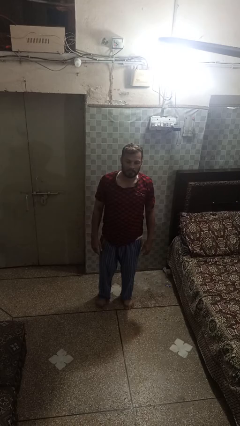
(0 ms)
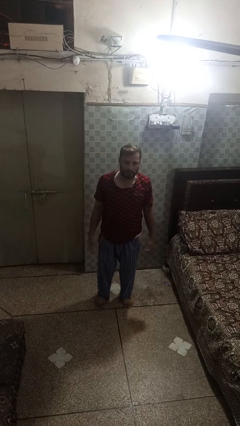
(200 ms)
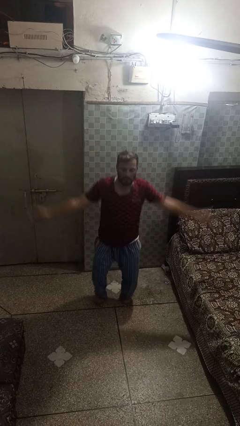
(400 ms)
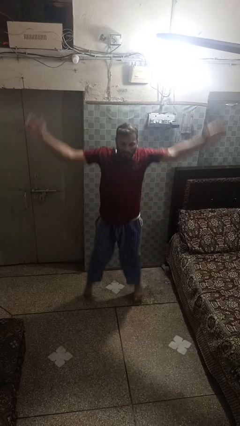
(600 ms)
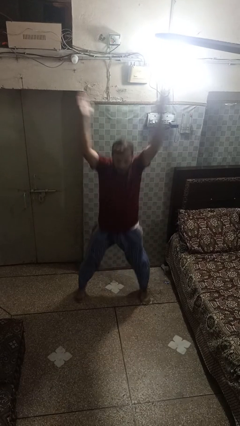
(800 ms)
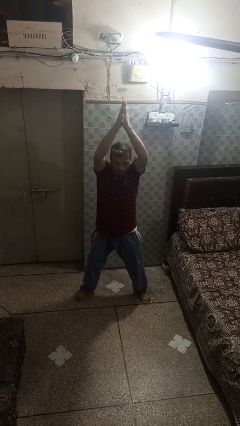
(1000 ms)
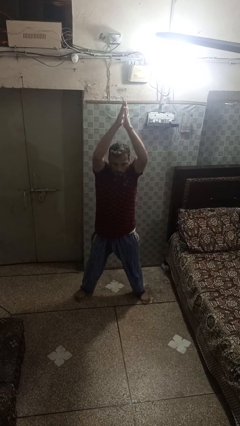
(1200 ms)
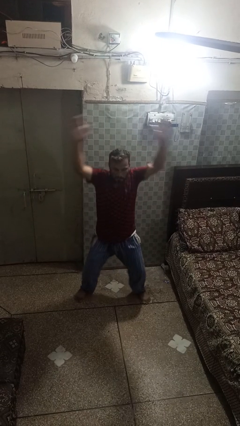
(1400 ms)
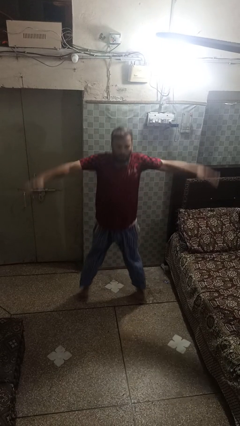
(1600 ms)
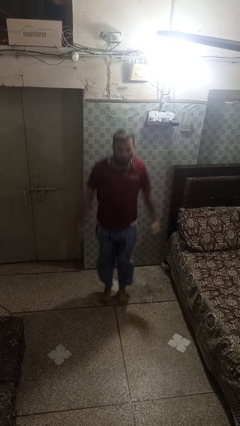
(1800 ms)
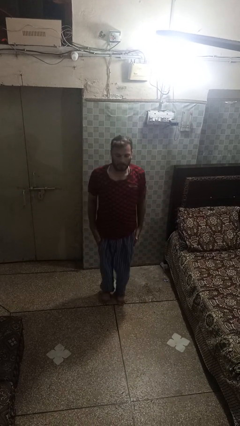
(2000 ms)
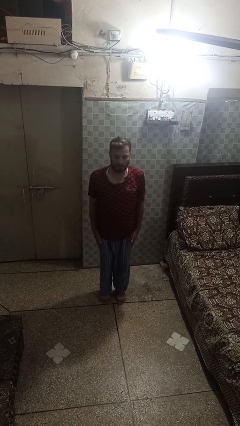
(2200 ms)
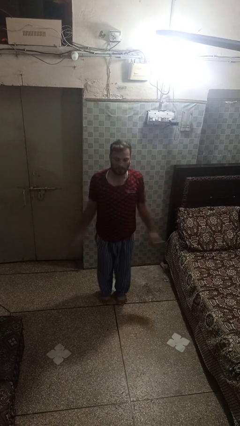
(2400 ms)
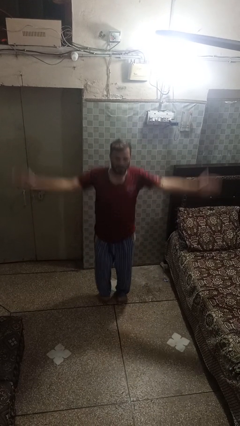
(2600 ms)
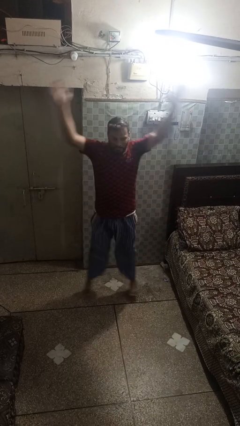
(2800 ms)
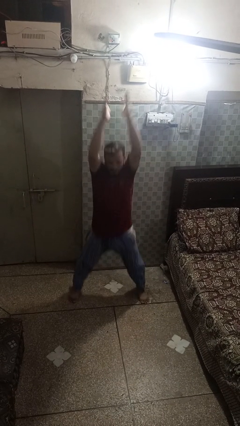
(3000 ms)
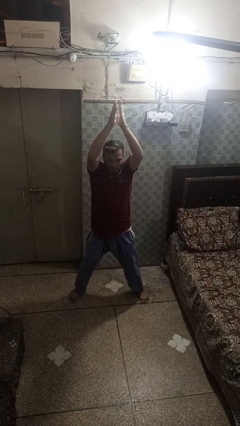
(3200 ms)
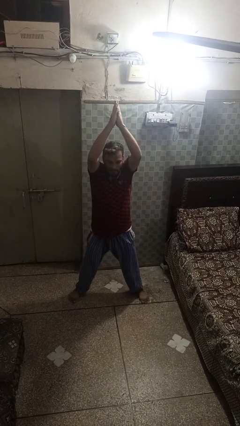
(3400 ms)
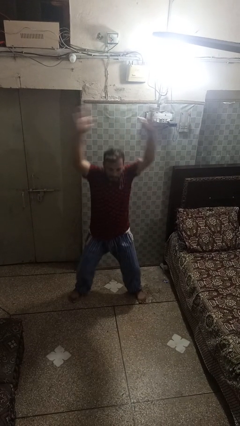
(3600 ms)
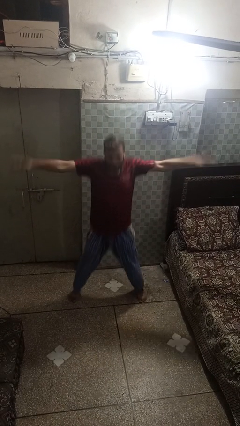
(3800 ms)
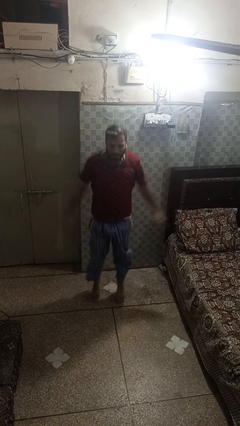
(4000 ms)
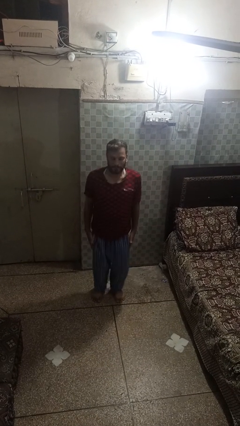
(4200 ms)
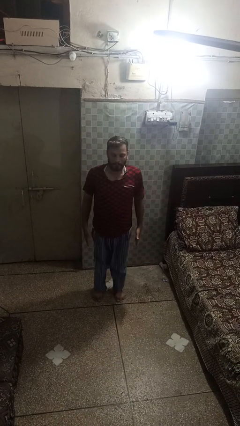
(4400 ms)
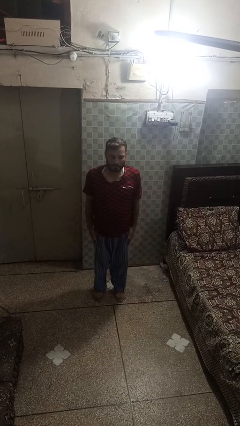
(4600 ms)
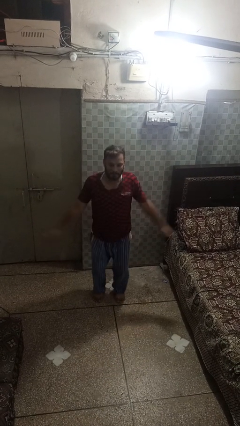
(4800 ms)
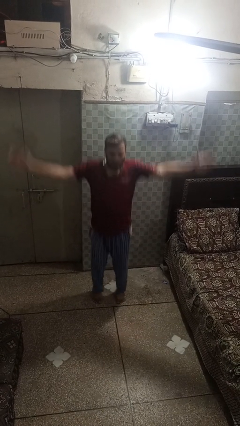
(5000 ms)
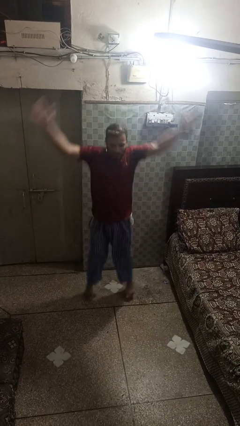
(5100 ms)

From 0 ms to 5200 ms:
person exercises with jumping jacks

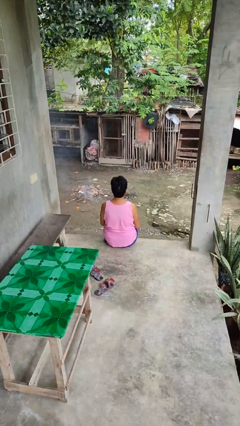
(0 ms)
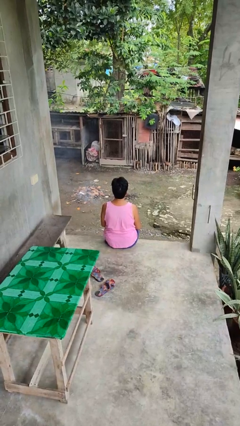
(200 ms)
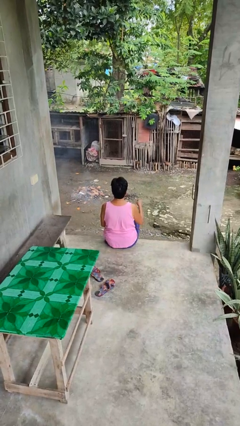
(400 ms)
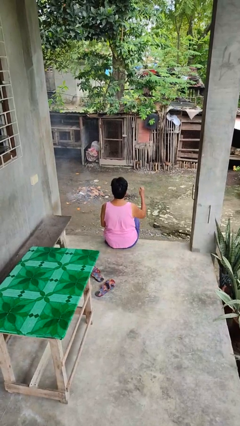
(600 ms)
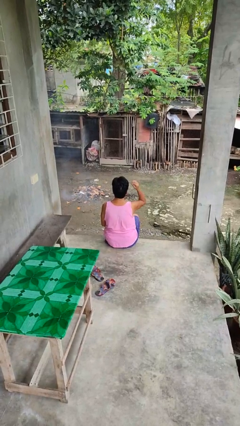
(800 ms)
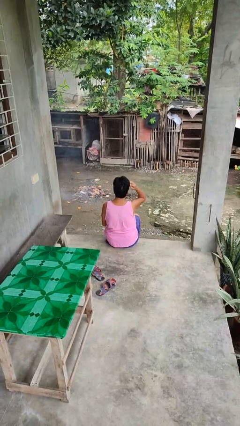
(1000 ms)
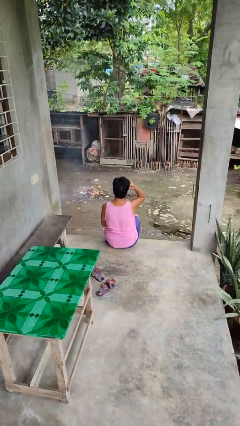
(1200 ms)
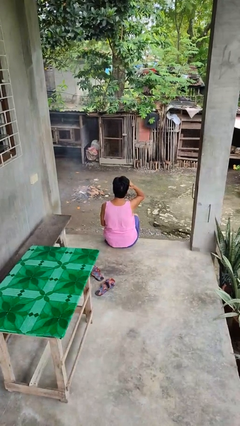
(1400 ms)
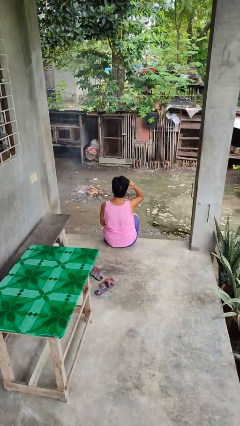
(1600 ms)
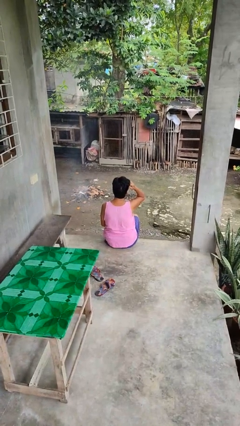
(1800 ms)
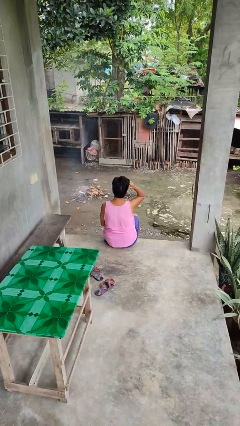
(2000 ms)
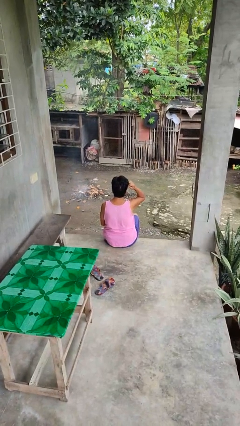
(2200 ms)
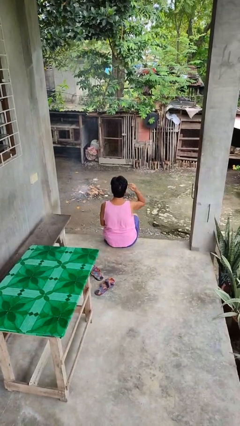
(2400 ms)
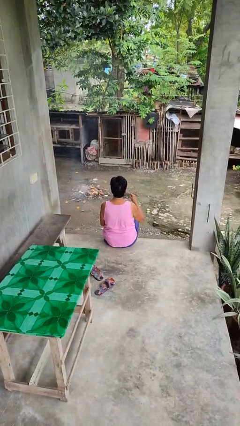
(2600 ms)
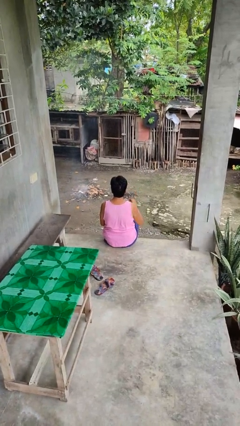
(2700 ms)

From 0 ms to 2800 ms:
person scratches face

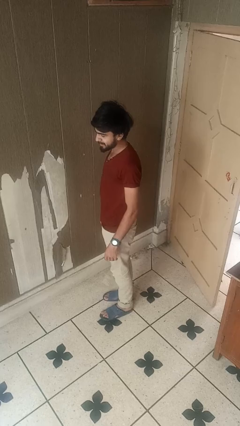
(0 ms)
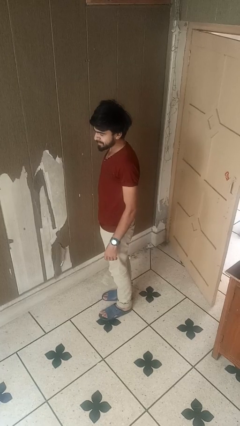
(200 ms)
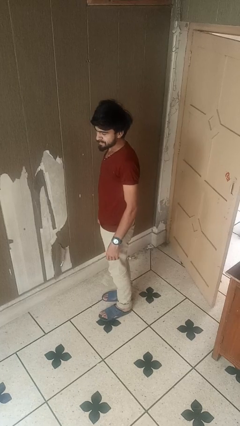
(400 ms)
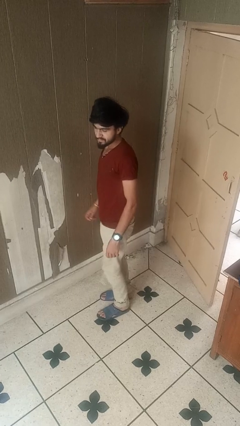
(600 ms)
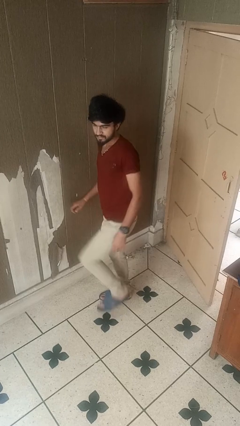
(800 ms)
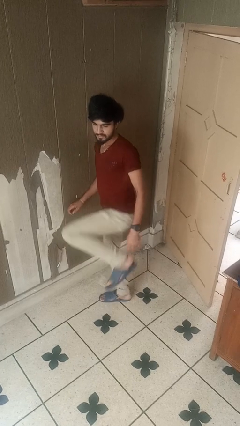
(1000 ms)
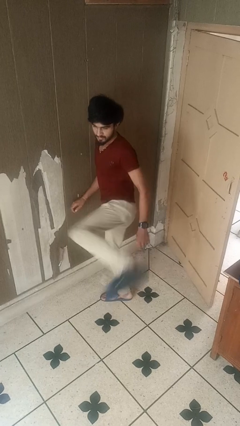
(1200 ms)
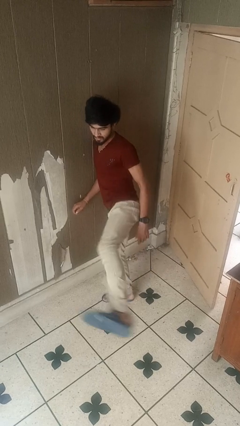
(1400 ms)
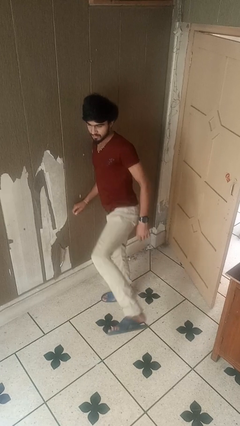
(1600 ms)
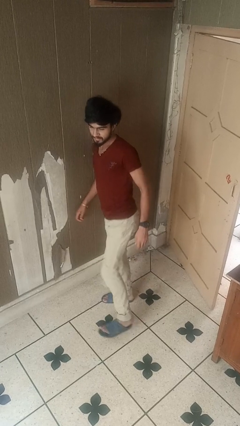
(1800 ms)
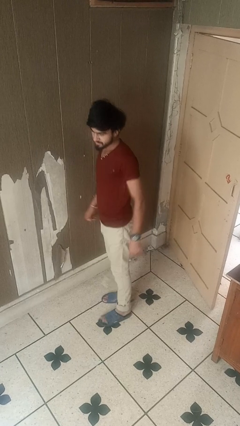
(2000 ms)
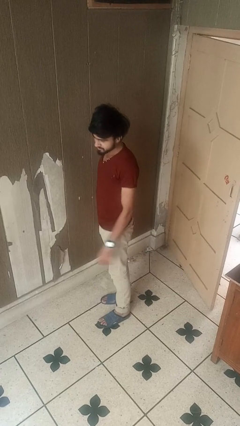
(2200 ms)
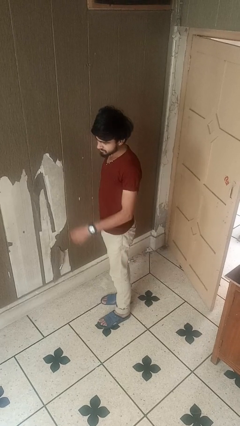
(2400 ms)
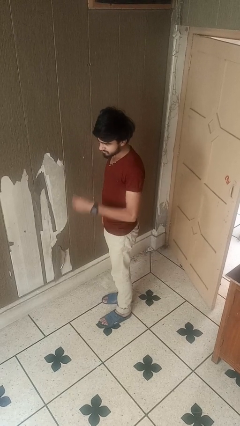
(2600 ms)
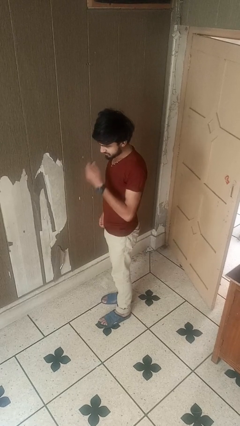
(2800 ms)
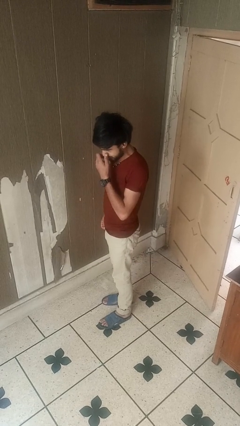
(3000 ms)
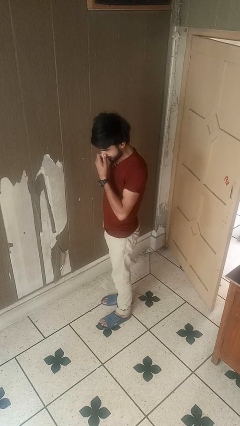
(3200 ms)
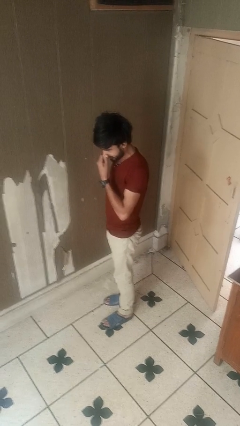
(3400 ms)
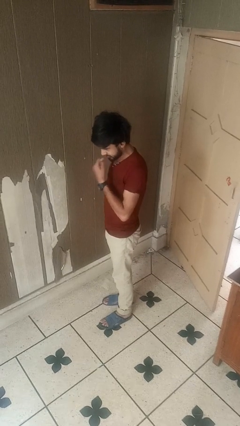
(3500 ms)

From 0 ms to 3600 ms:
person karate kicks

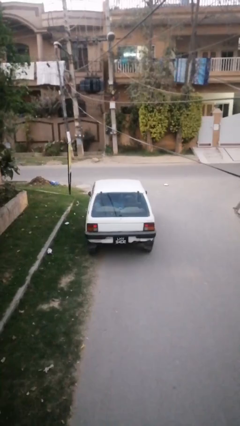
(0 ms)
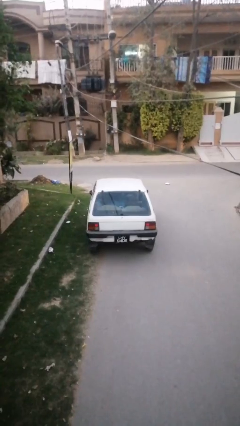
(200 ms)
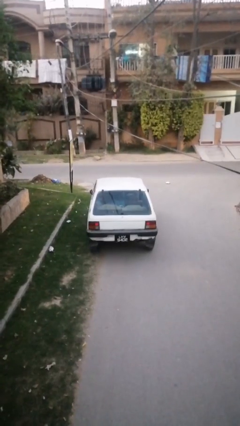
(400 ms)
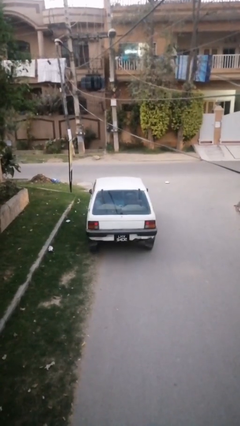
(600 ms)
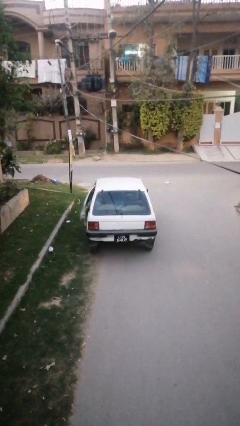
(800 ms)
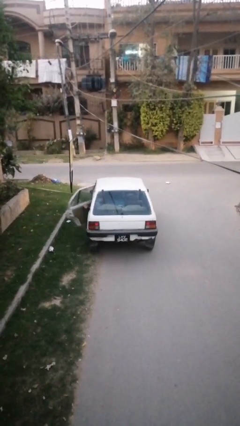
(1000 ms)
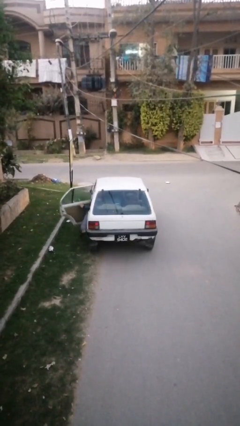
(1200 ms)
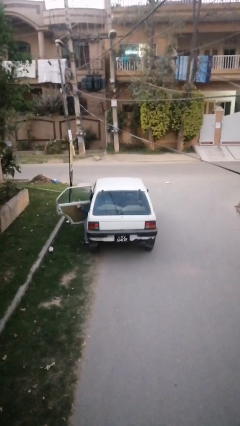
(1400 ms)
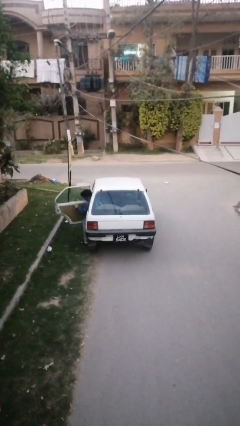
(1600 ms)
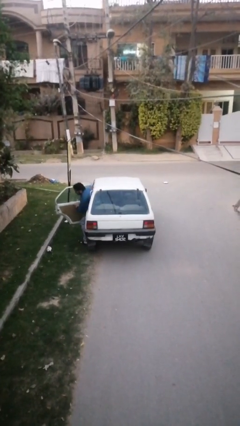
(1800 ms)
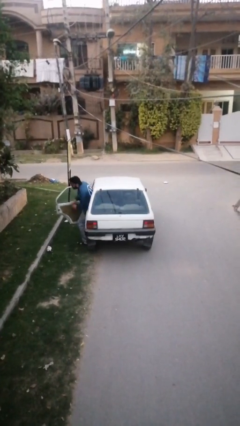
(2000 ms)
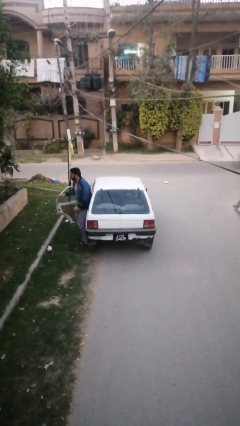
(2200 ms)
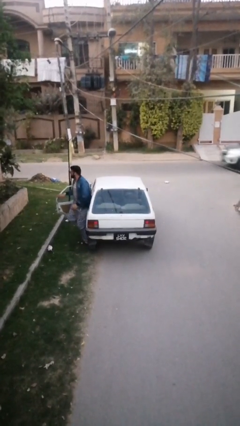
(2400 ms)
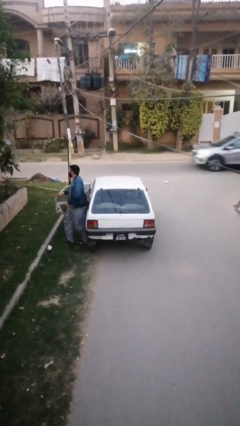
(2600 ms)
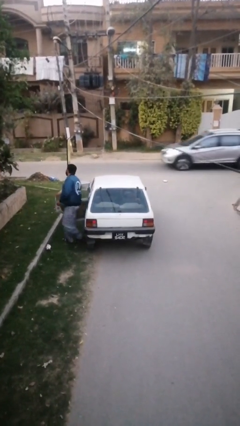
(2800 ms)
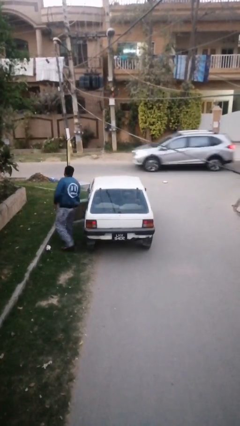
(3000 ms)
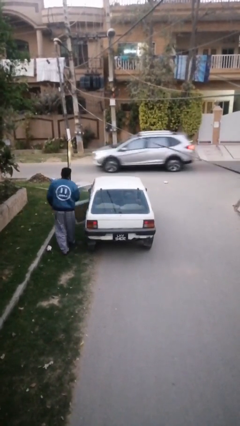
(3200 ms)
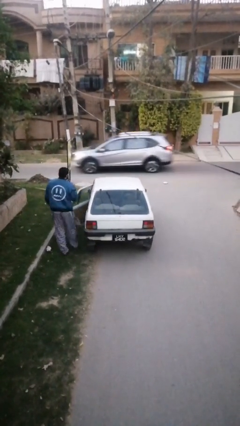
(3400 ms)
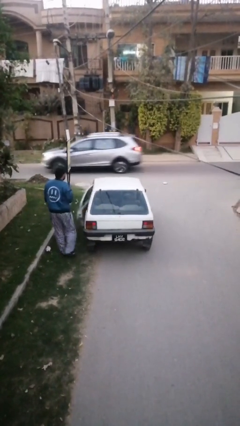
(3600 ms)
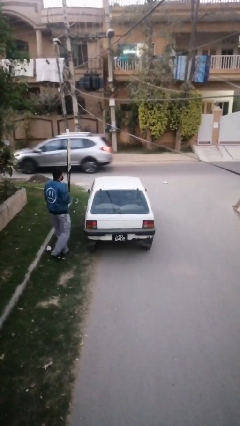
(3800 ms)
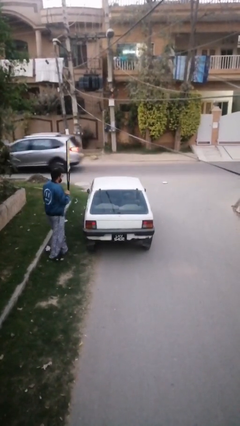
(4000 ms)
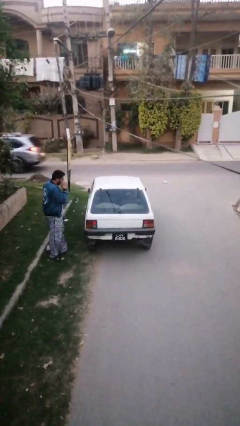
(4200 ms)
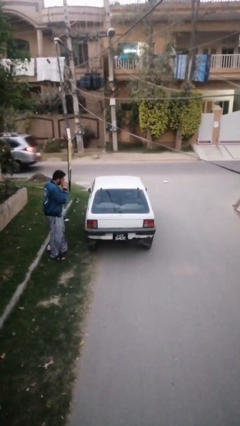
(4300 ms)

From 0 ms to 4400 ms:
car drops off person

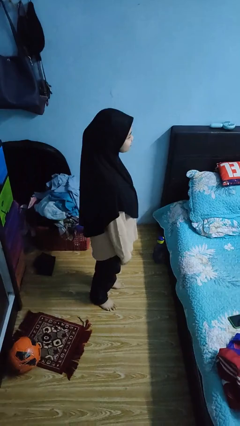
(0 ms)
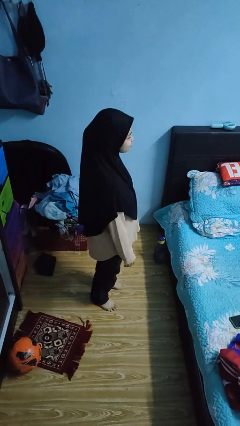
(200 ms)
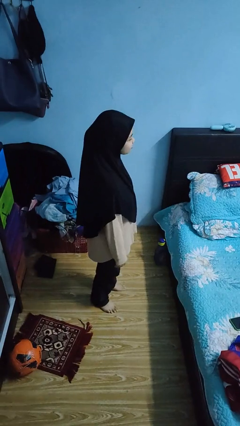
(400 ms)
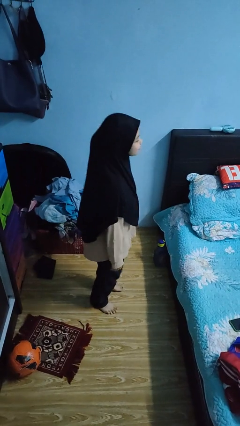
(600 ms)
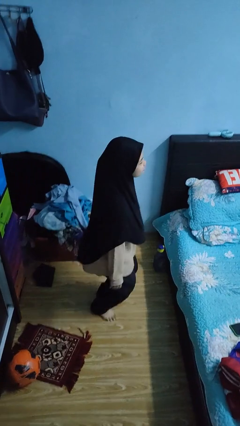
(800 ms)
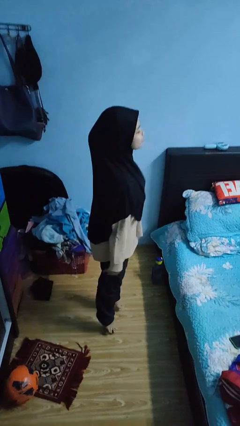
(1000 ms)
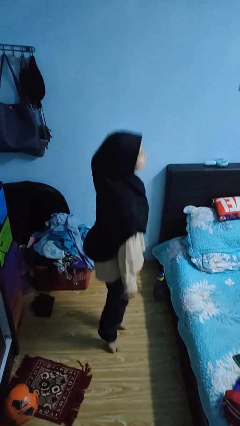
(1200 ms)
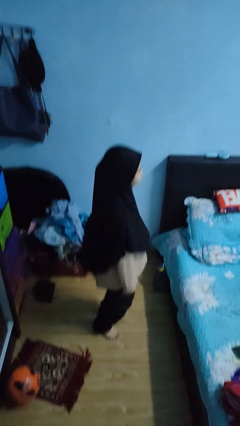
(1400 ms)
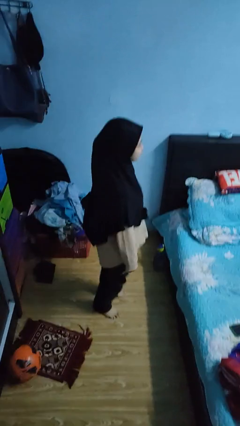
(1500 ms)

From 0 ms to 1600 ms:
person jumps

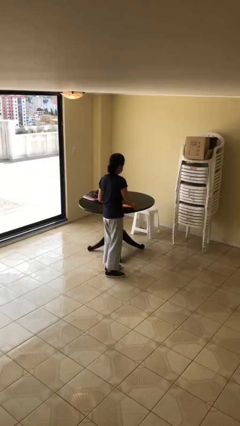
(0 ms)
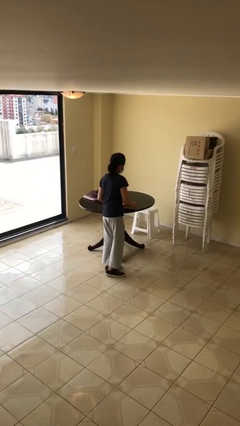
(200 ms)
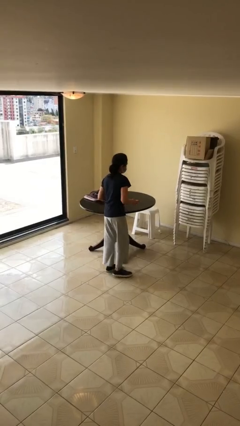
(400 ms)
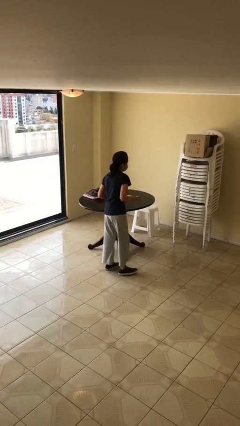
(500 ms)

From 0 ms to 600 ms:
person picks up object from table
